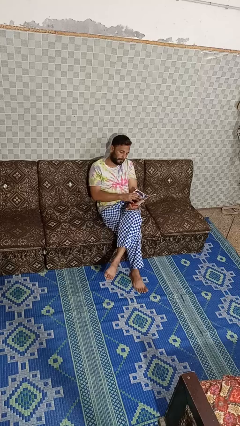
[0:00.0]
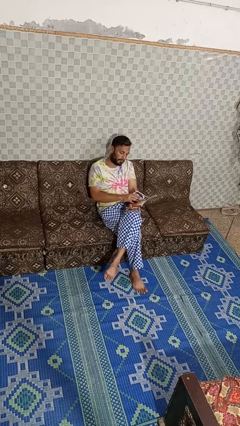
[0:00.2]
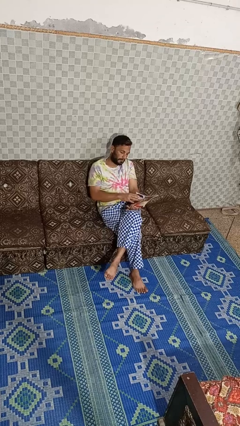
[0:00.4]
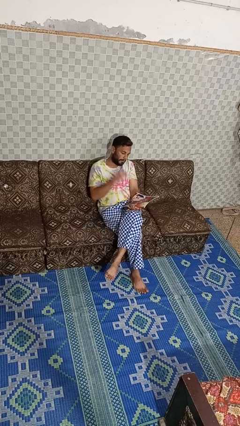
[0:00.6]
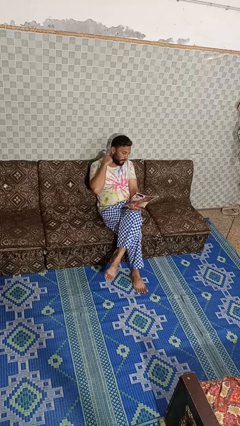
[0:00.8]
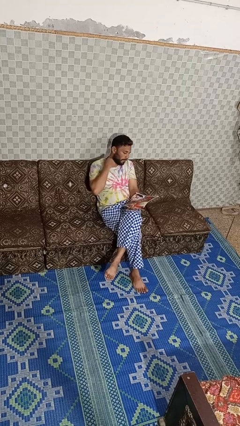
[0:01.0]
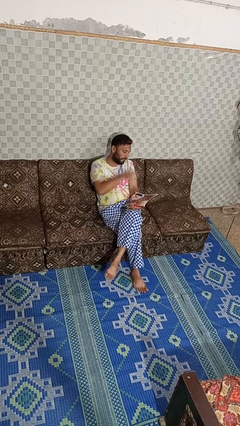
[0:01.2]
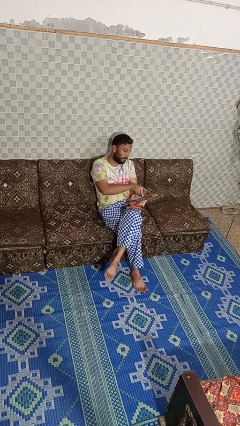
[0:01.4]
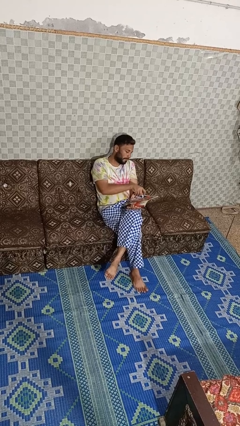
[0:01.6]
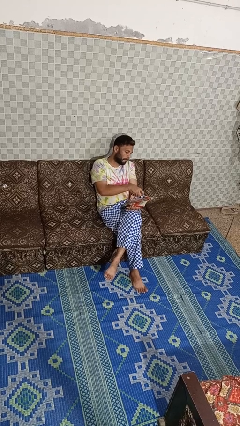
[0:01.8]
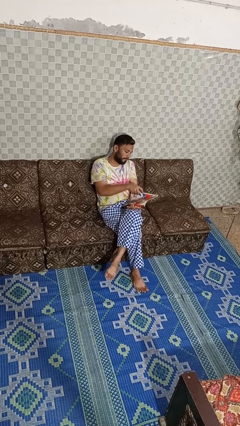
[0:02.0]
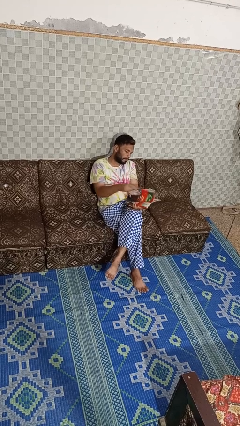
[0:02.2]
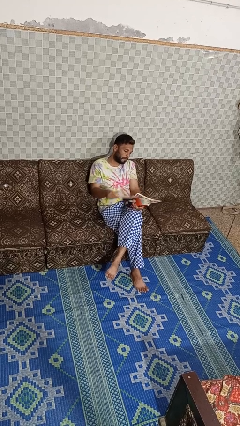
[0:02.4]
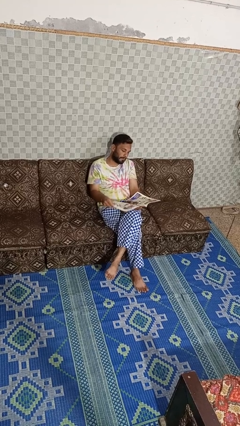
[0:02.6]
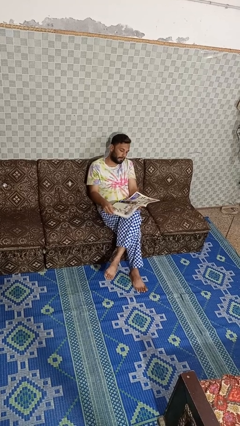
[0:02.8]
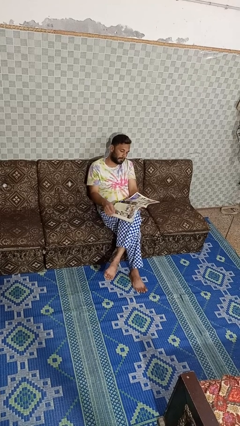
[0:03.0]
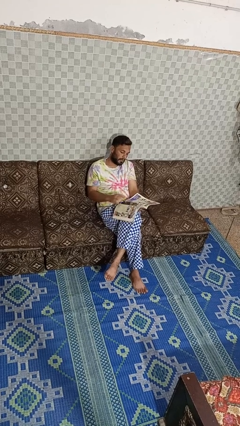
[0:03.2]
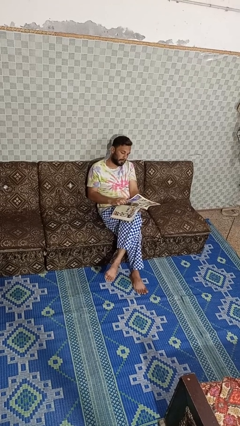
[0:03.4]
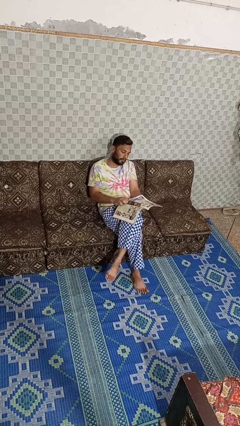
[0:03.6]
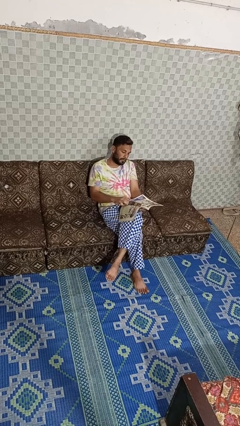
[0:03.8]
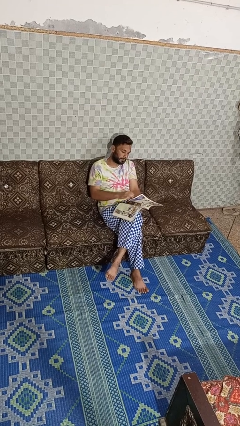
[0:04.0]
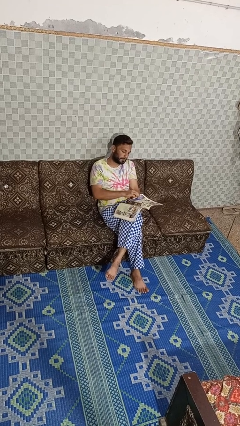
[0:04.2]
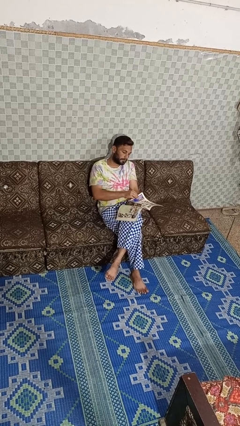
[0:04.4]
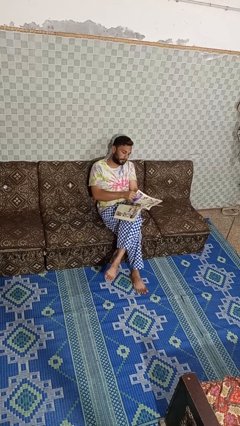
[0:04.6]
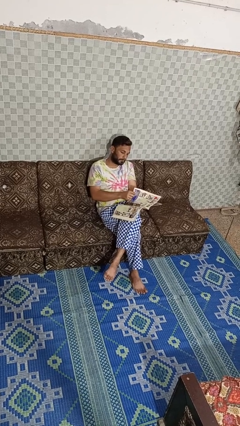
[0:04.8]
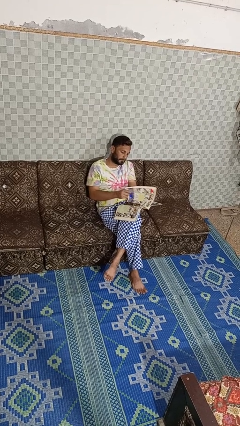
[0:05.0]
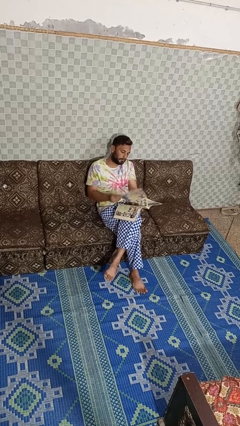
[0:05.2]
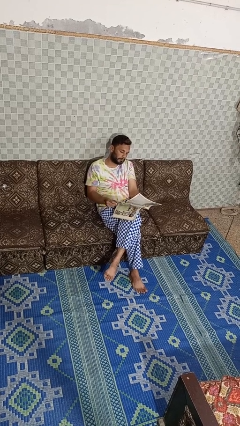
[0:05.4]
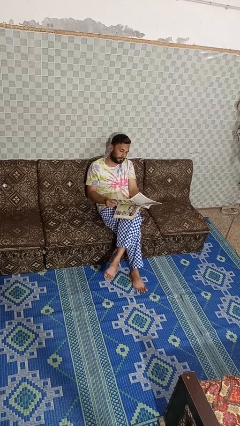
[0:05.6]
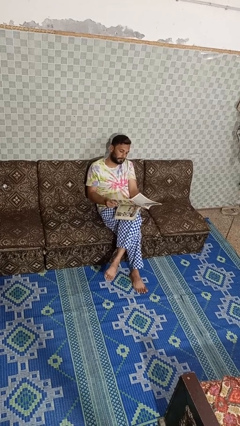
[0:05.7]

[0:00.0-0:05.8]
person reads magazine

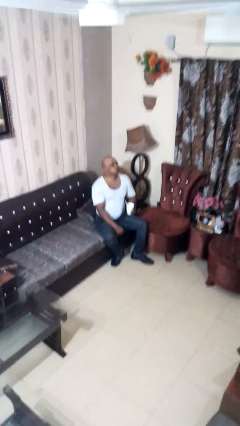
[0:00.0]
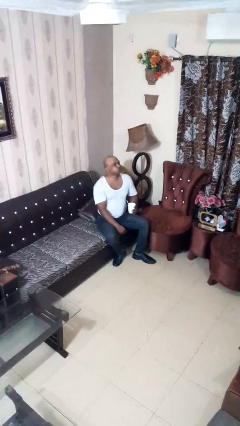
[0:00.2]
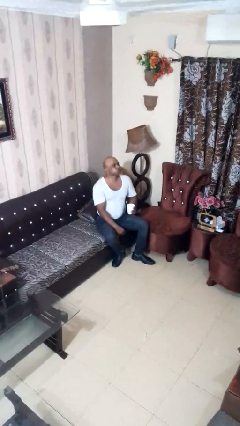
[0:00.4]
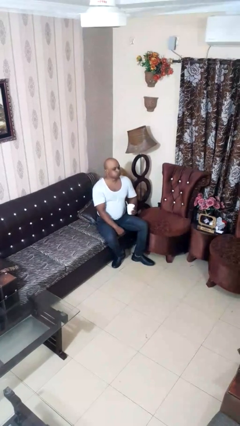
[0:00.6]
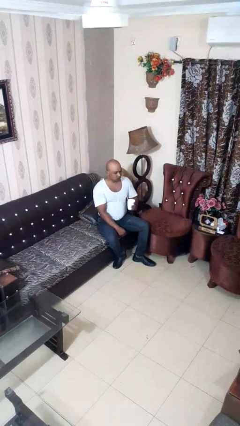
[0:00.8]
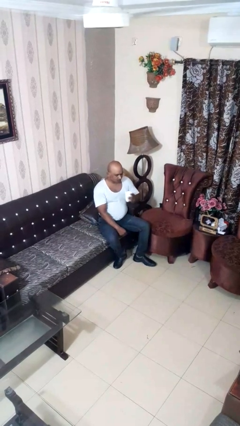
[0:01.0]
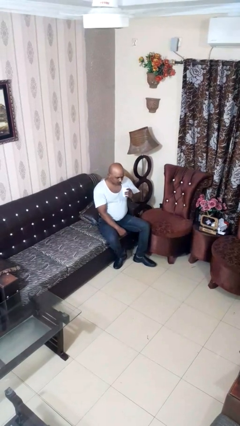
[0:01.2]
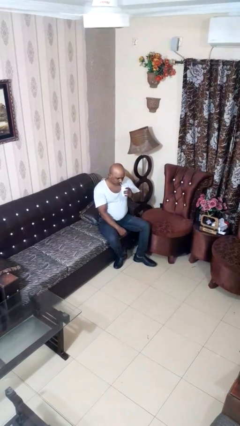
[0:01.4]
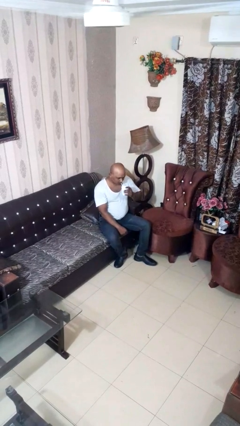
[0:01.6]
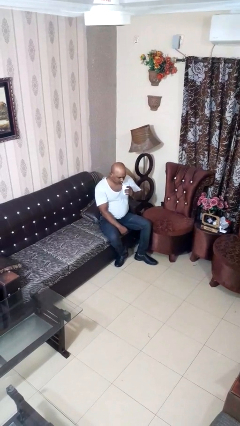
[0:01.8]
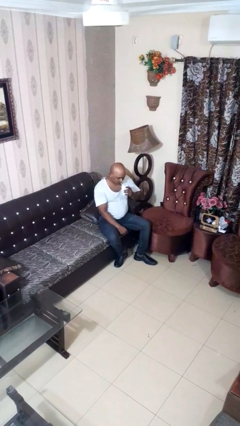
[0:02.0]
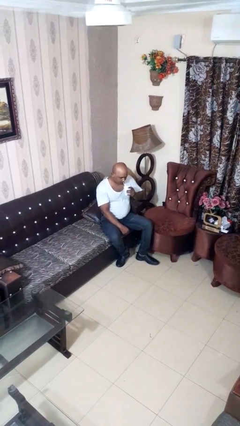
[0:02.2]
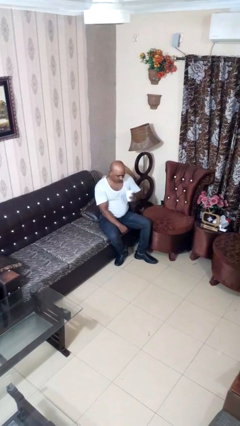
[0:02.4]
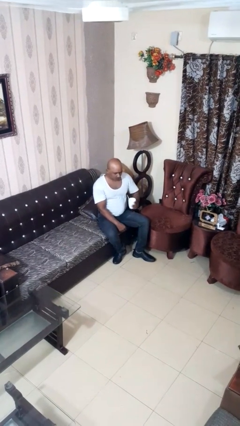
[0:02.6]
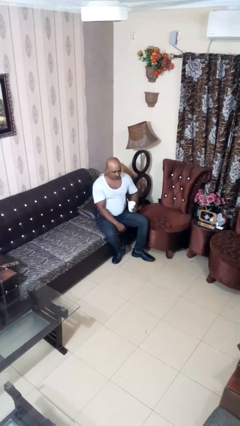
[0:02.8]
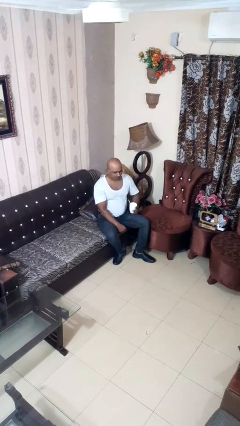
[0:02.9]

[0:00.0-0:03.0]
person drinks from straw

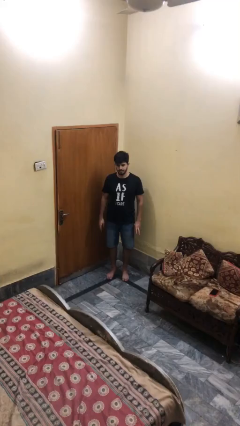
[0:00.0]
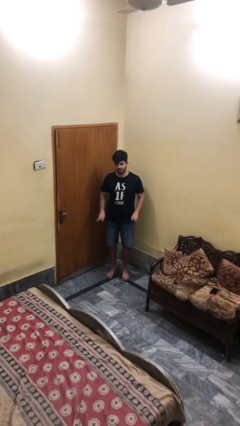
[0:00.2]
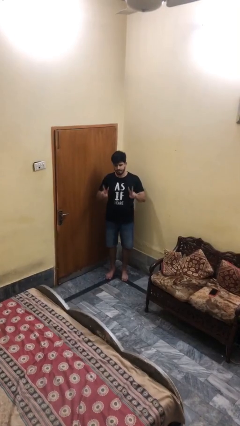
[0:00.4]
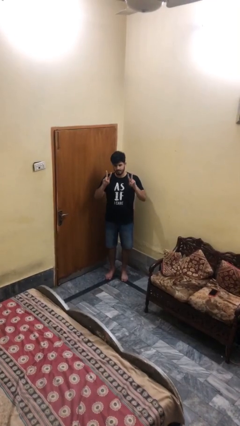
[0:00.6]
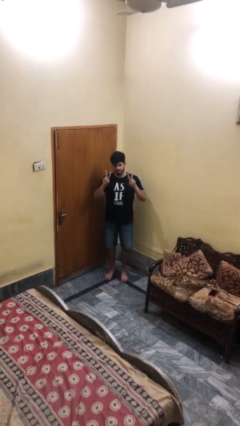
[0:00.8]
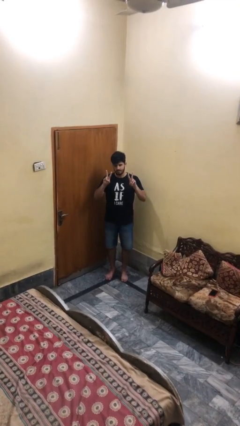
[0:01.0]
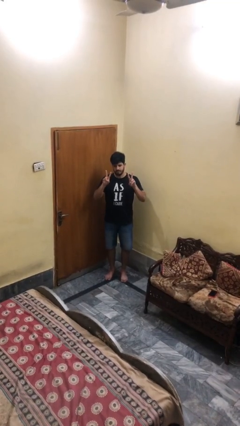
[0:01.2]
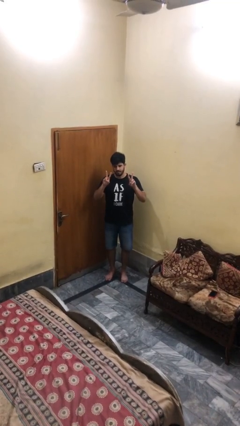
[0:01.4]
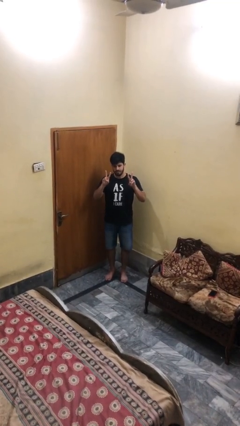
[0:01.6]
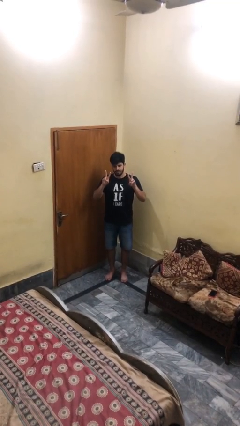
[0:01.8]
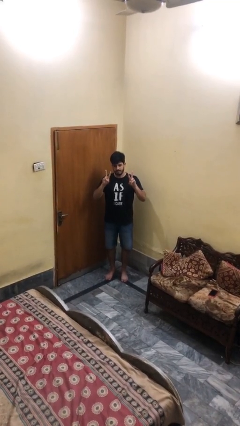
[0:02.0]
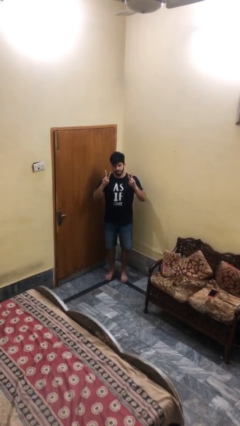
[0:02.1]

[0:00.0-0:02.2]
person gestures peace

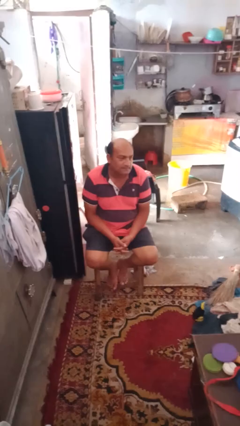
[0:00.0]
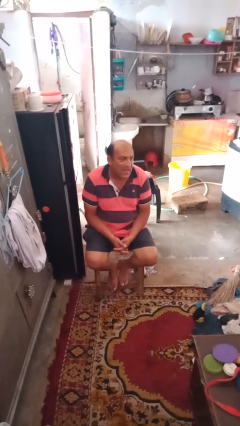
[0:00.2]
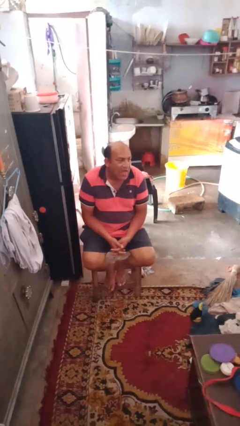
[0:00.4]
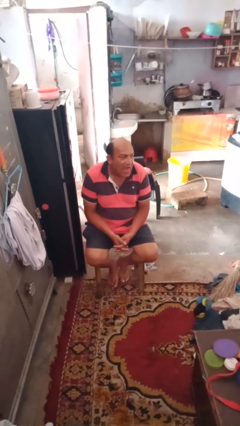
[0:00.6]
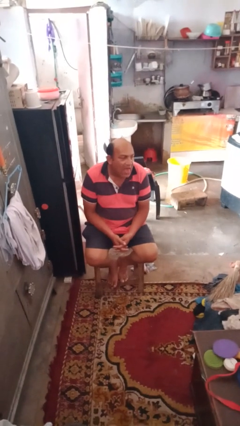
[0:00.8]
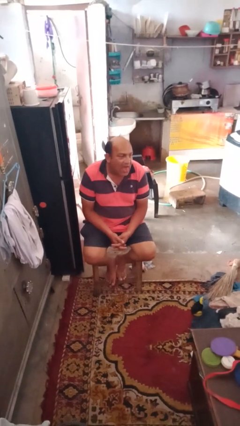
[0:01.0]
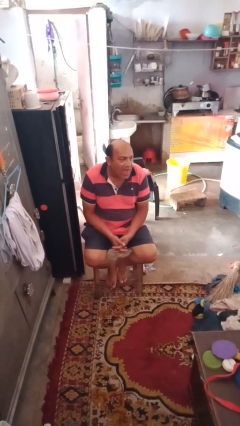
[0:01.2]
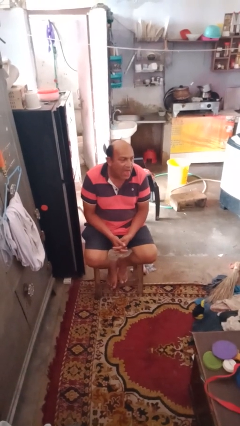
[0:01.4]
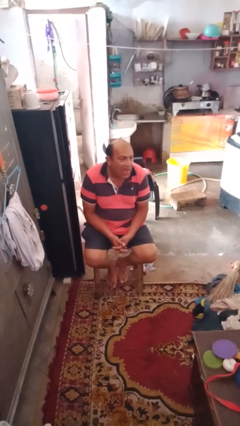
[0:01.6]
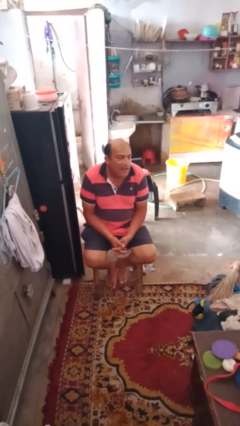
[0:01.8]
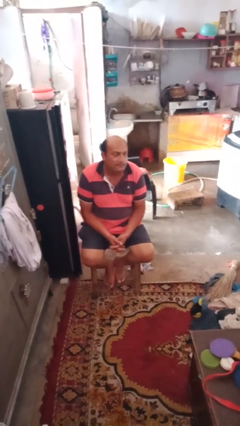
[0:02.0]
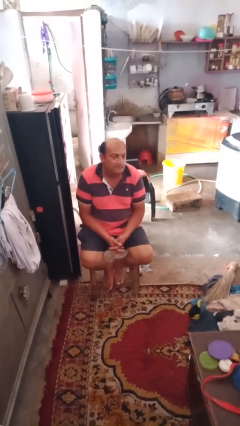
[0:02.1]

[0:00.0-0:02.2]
person sticks out tongue

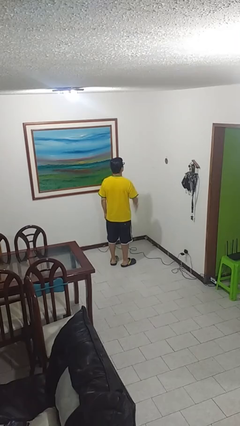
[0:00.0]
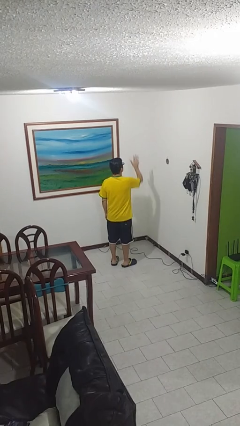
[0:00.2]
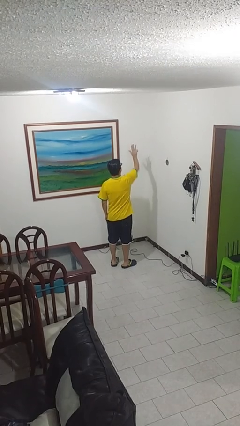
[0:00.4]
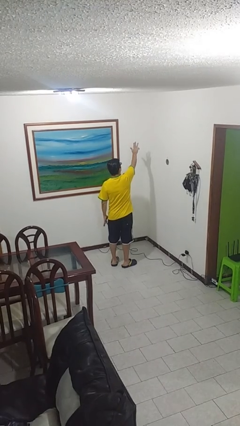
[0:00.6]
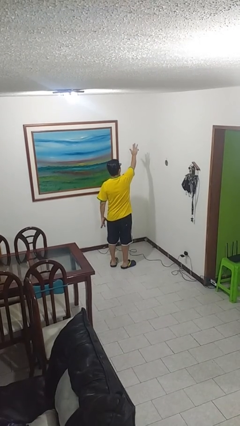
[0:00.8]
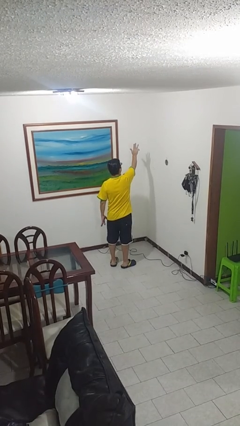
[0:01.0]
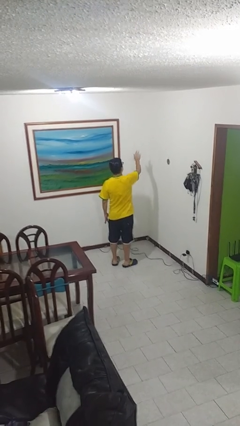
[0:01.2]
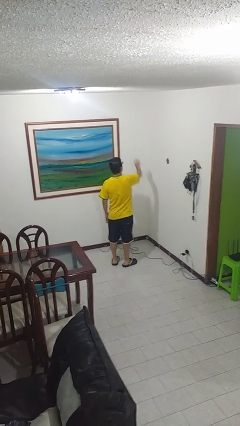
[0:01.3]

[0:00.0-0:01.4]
person gestures number four

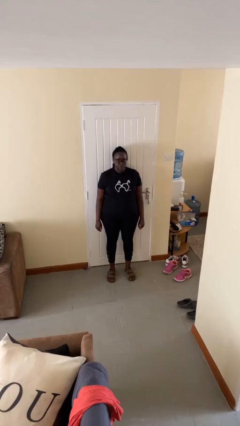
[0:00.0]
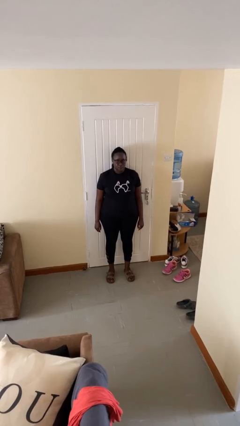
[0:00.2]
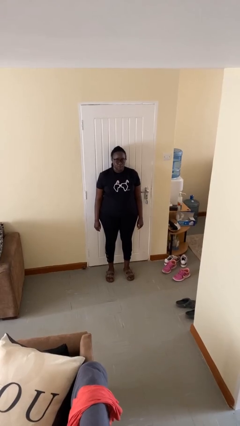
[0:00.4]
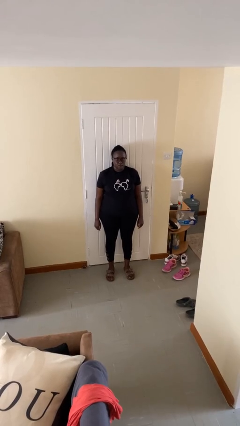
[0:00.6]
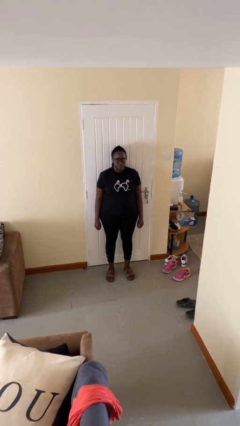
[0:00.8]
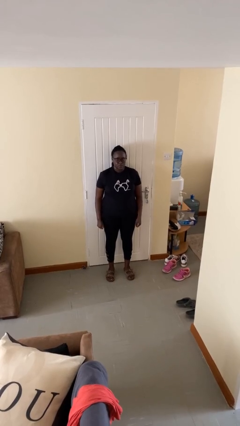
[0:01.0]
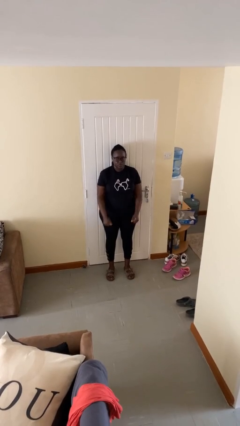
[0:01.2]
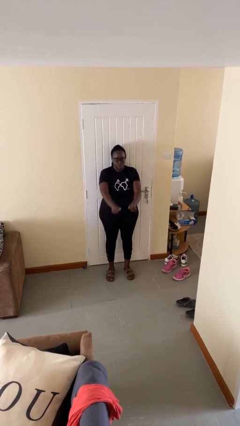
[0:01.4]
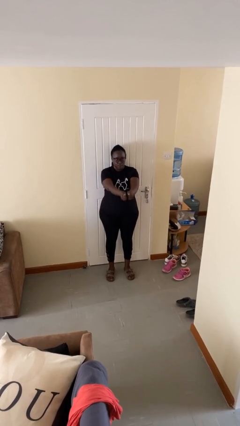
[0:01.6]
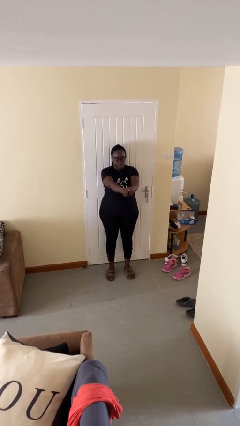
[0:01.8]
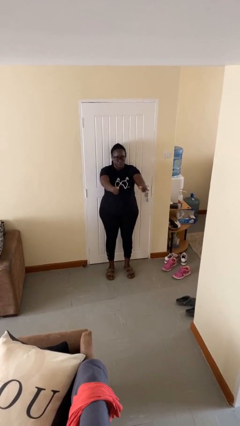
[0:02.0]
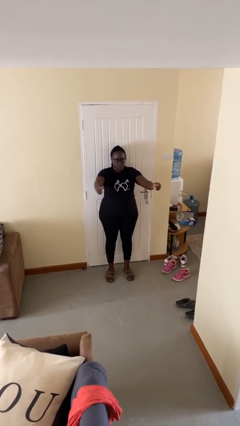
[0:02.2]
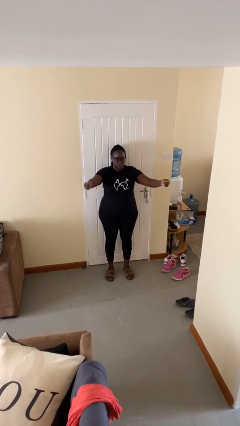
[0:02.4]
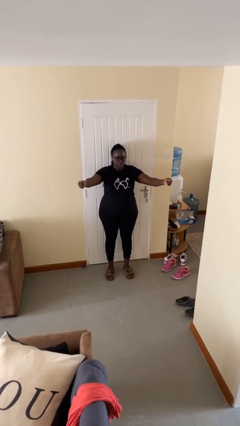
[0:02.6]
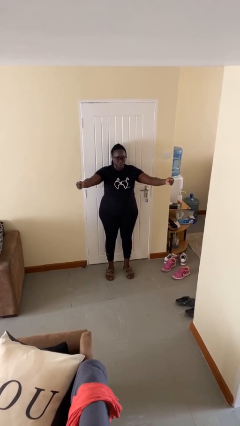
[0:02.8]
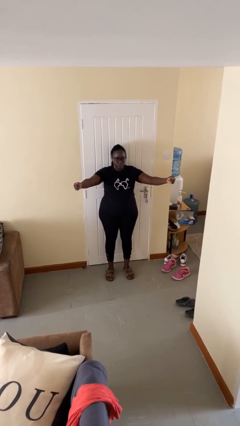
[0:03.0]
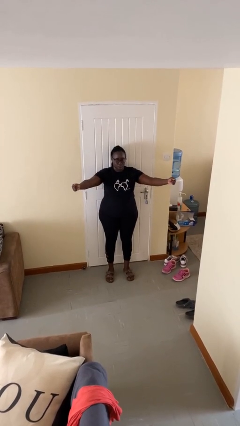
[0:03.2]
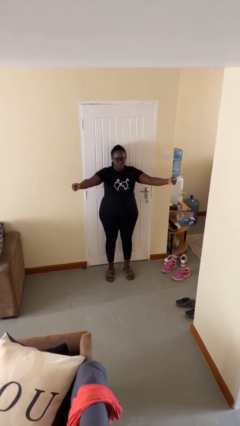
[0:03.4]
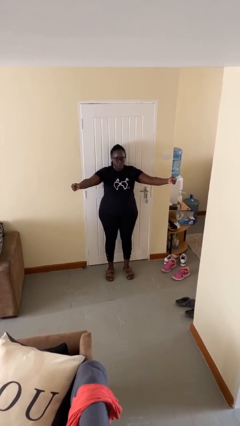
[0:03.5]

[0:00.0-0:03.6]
person gestures zoom in
